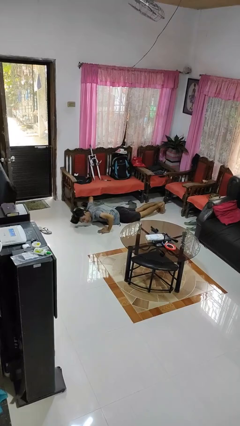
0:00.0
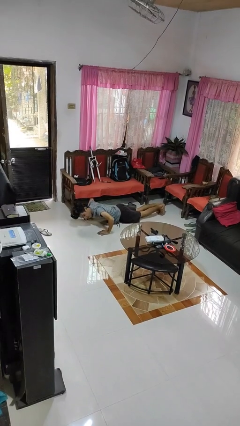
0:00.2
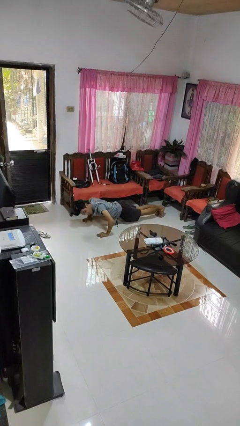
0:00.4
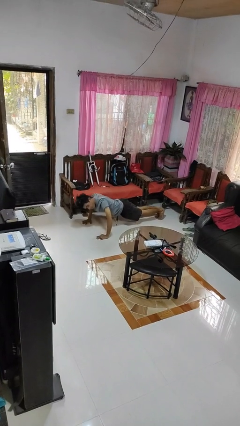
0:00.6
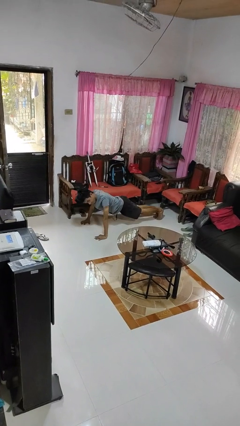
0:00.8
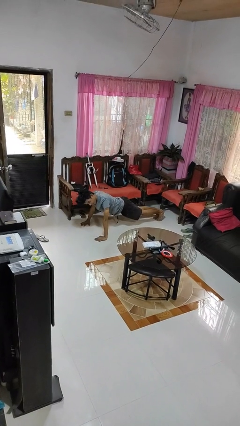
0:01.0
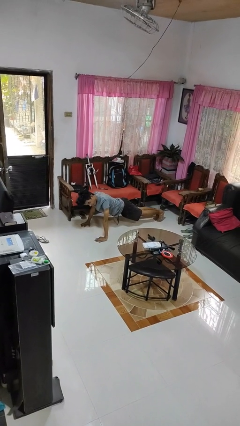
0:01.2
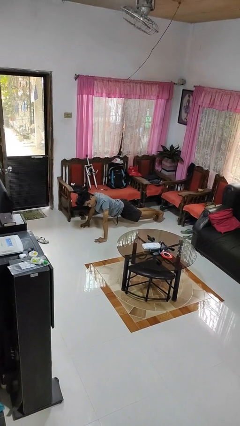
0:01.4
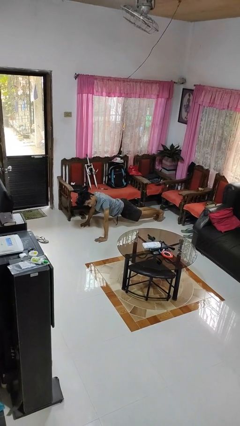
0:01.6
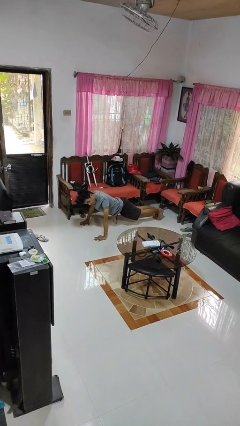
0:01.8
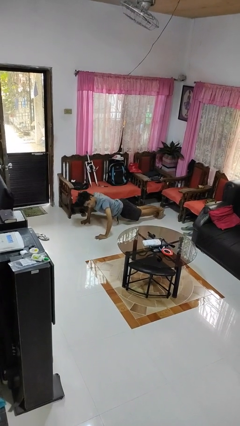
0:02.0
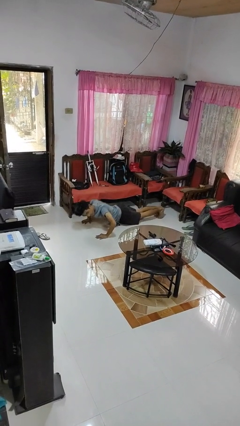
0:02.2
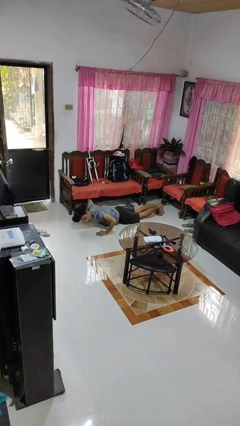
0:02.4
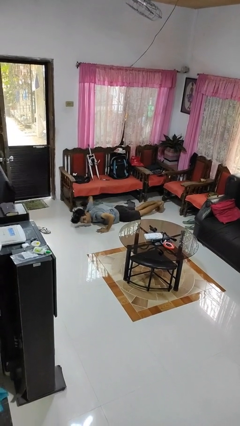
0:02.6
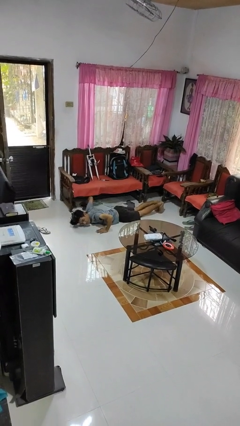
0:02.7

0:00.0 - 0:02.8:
person exercises with pushup

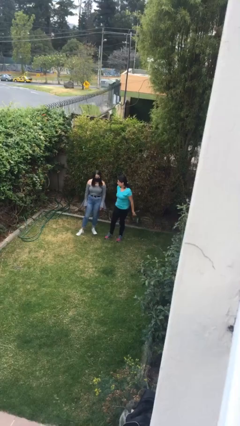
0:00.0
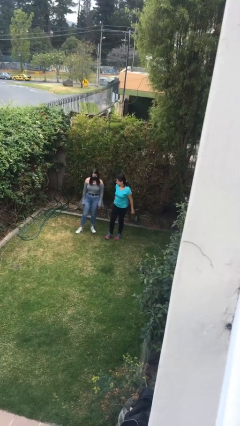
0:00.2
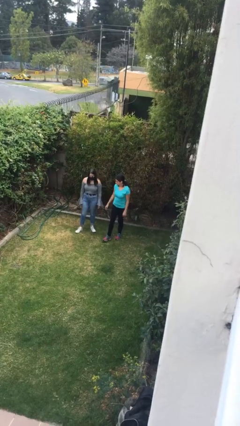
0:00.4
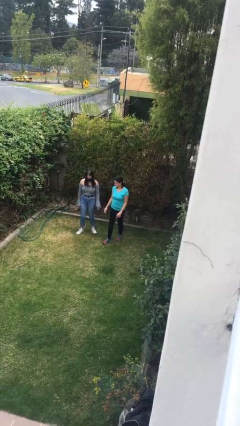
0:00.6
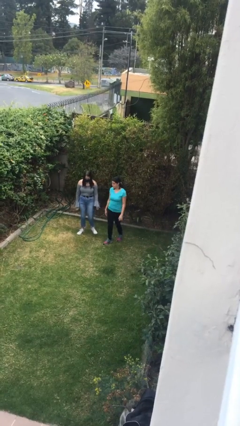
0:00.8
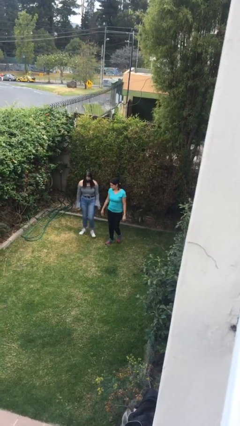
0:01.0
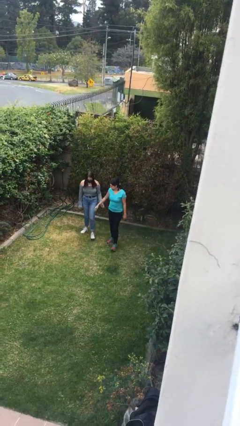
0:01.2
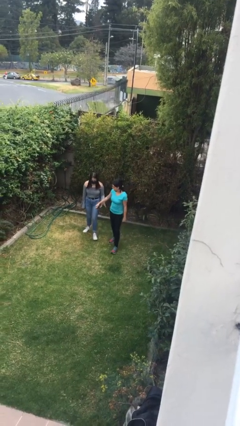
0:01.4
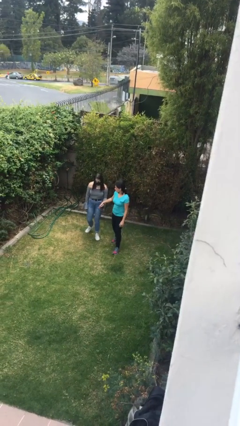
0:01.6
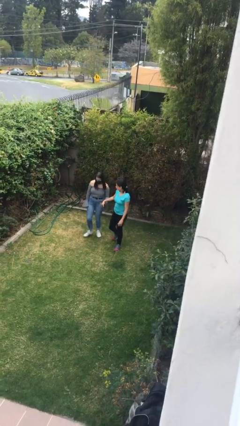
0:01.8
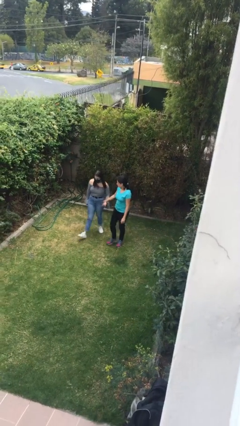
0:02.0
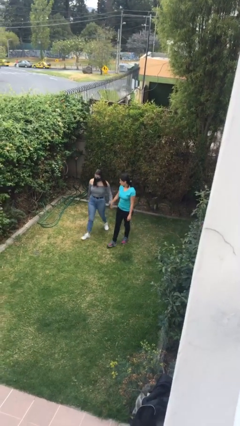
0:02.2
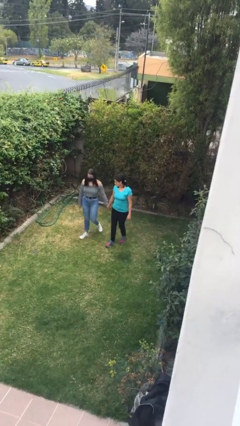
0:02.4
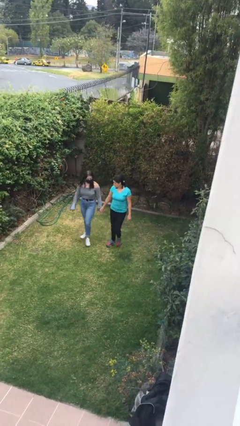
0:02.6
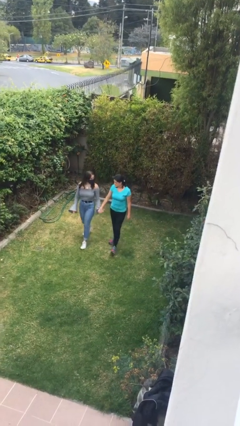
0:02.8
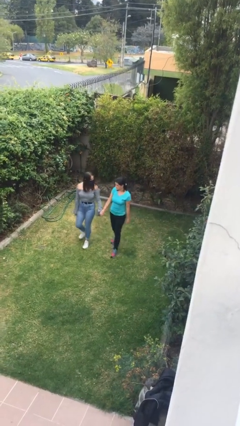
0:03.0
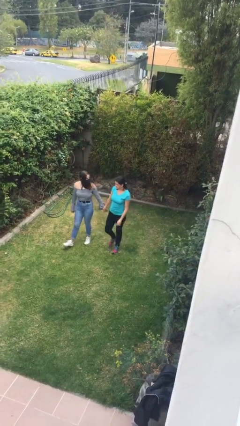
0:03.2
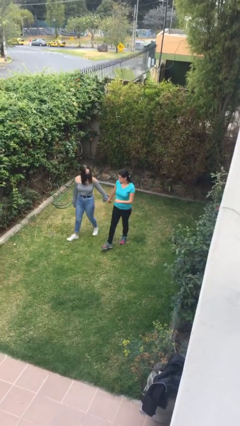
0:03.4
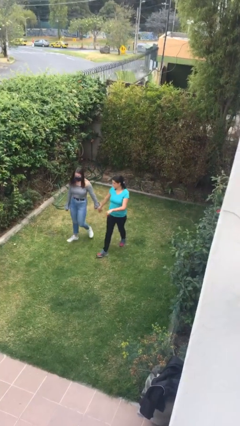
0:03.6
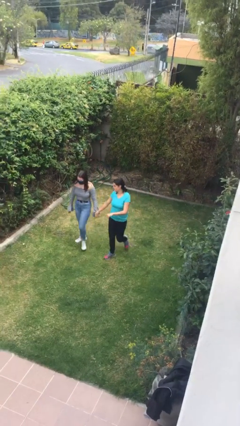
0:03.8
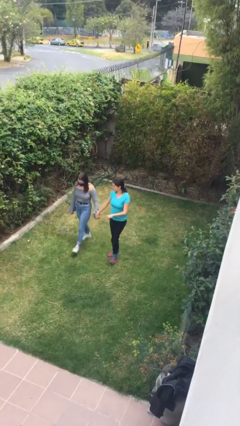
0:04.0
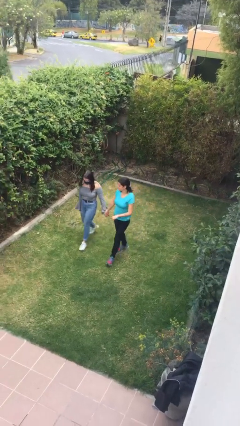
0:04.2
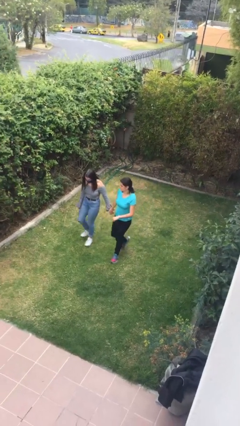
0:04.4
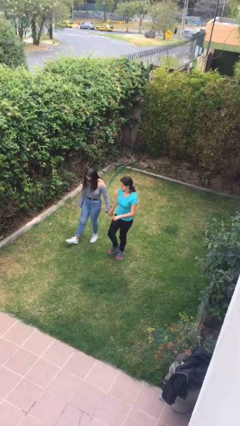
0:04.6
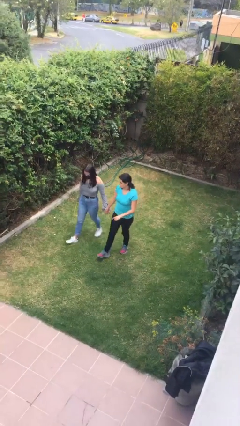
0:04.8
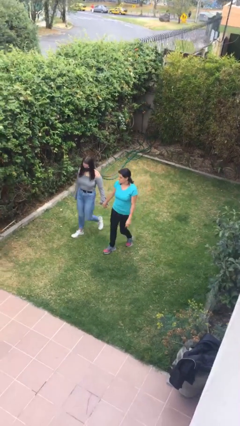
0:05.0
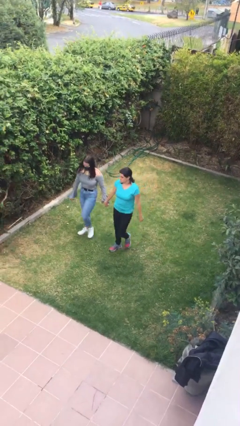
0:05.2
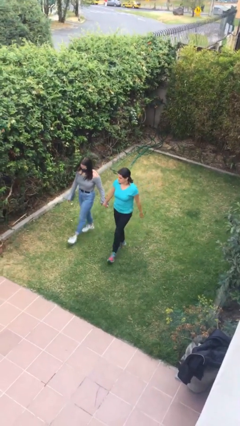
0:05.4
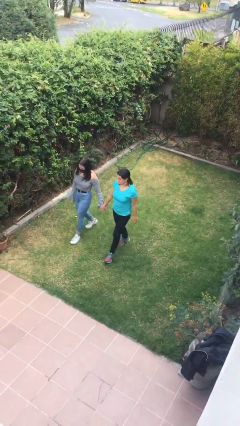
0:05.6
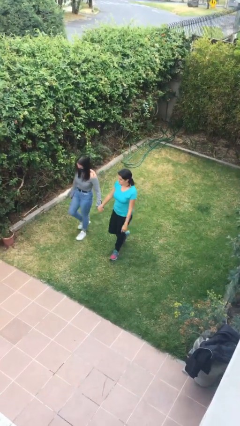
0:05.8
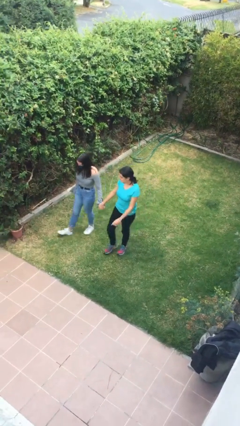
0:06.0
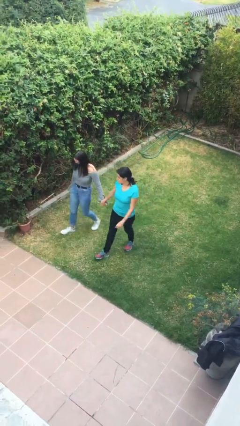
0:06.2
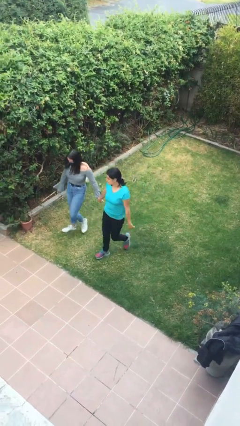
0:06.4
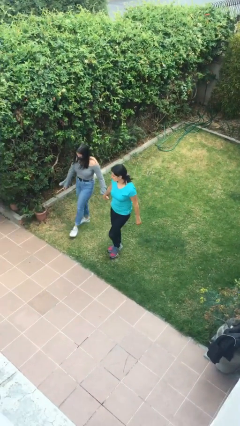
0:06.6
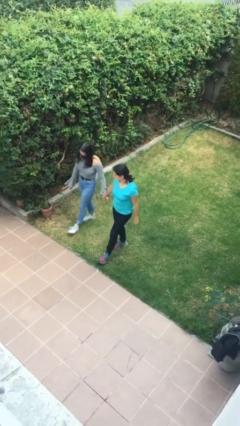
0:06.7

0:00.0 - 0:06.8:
person holds hand

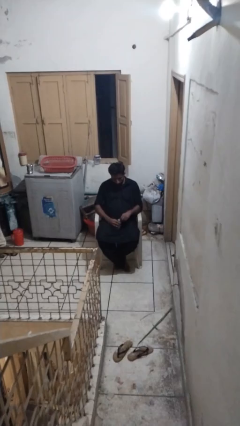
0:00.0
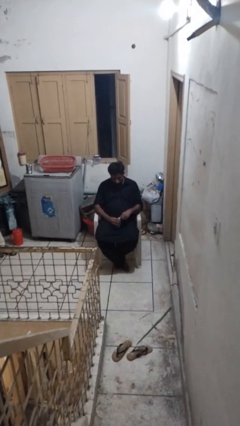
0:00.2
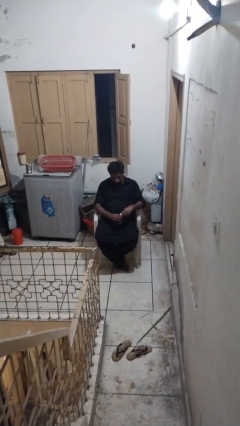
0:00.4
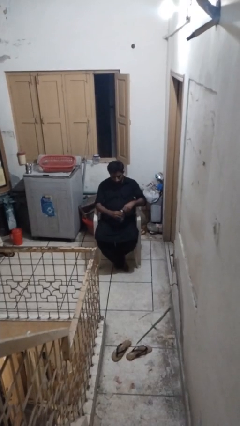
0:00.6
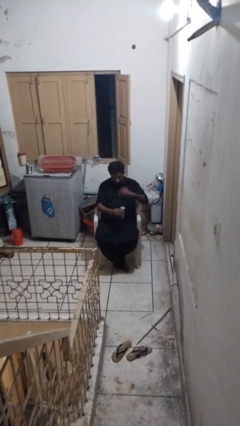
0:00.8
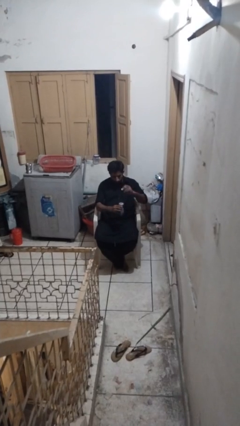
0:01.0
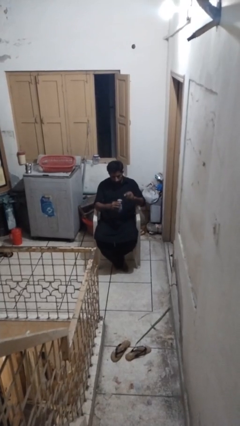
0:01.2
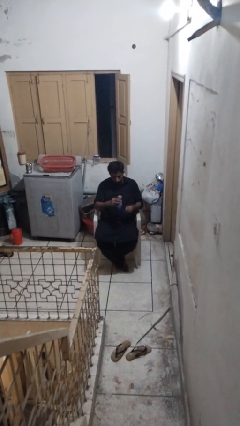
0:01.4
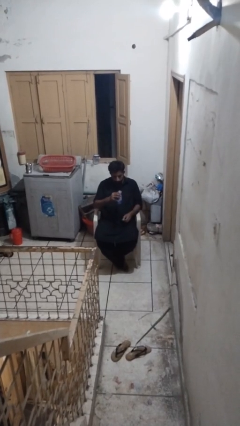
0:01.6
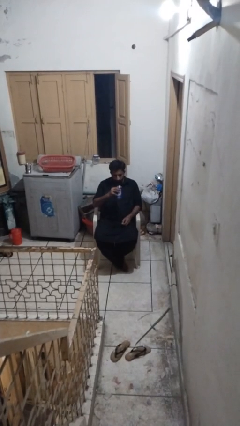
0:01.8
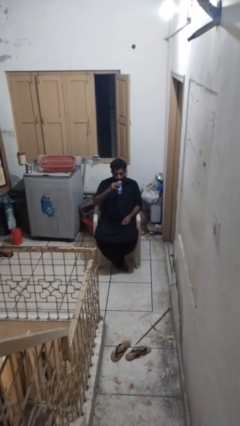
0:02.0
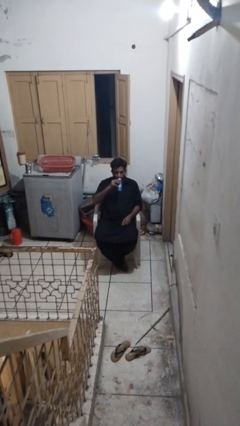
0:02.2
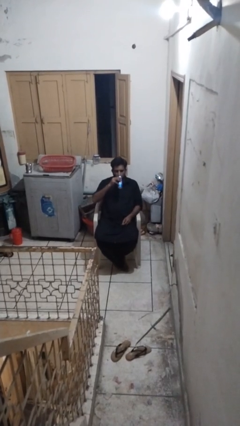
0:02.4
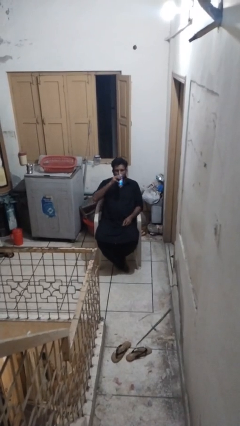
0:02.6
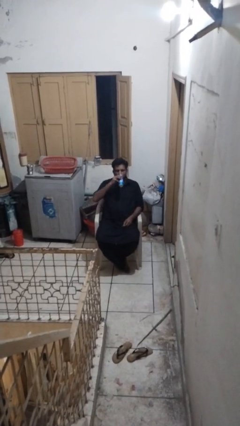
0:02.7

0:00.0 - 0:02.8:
person opens beverage can

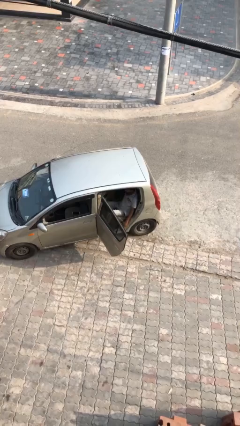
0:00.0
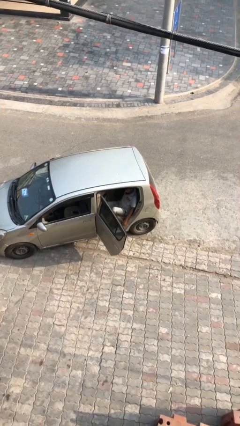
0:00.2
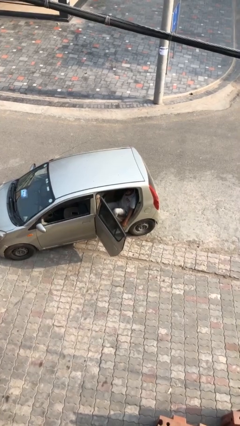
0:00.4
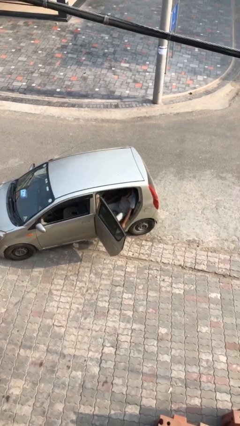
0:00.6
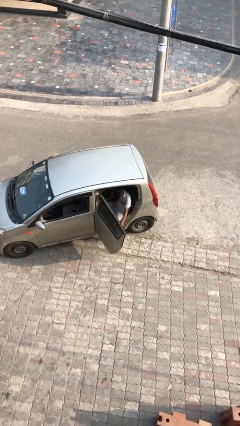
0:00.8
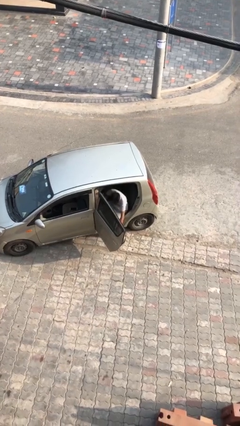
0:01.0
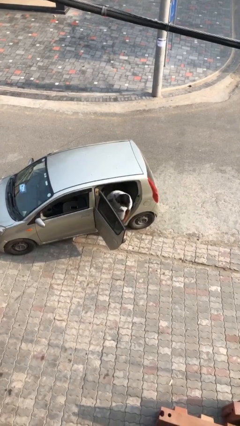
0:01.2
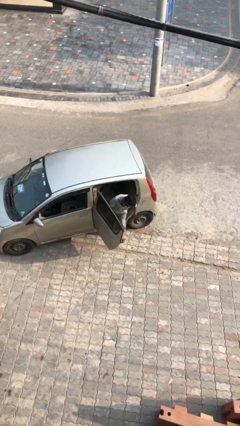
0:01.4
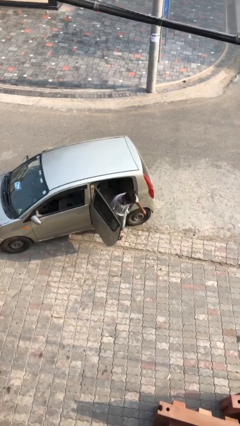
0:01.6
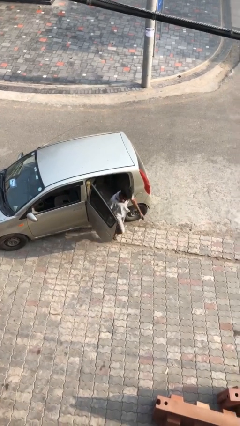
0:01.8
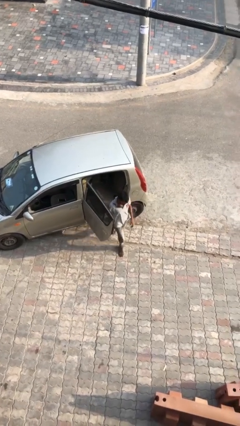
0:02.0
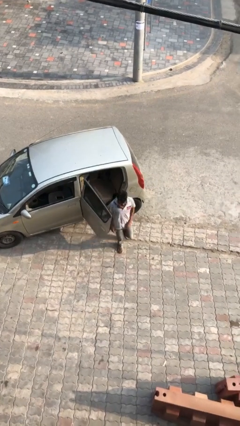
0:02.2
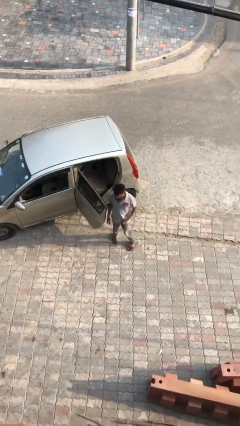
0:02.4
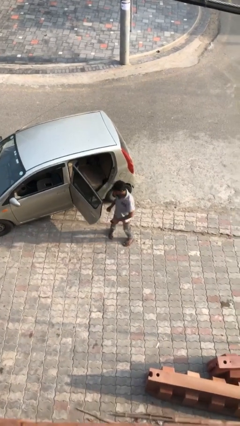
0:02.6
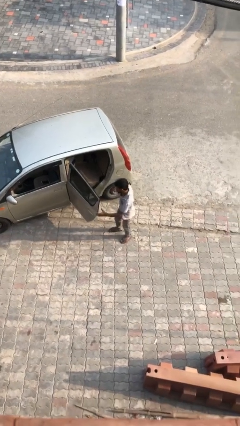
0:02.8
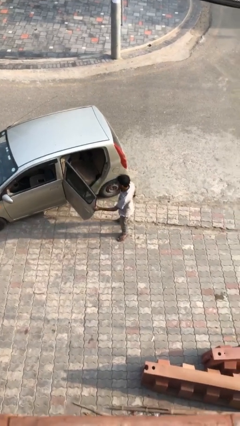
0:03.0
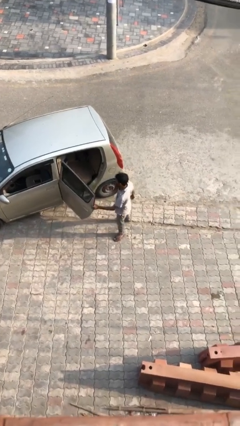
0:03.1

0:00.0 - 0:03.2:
person exits car

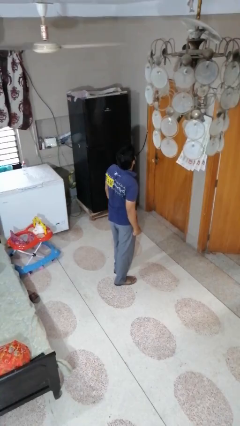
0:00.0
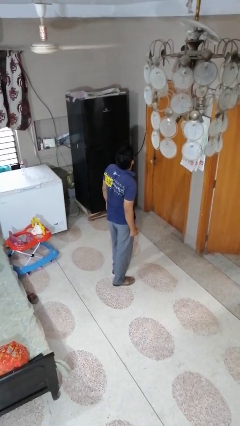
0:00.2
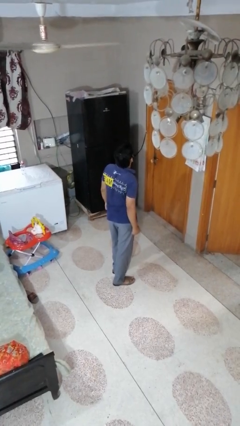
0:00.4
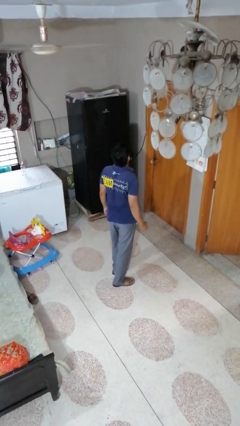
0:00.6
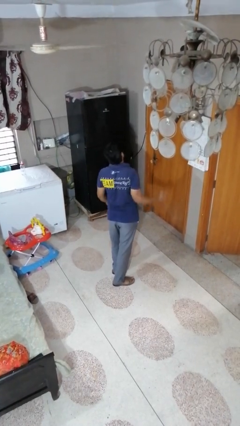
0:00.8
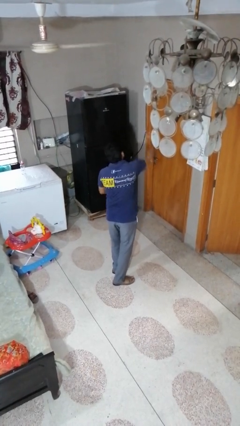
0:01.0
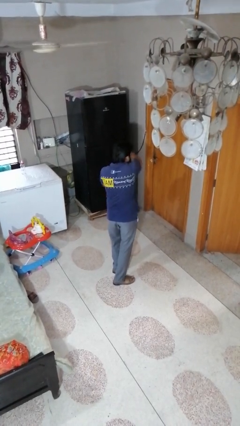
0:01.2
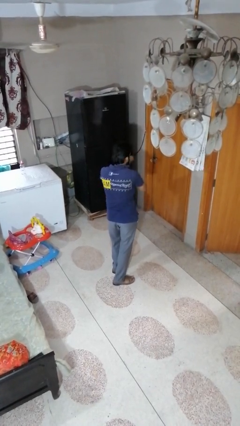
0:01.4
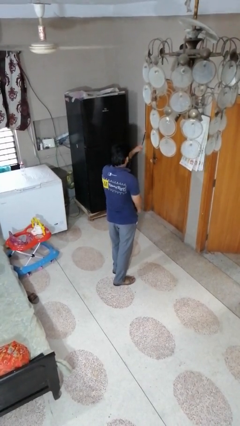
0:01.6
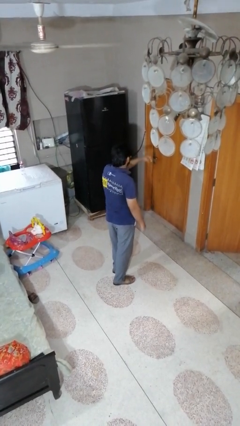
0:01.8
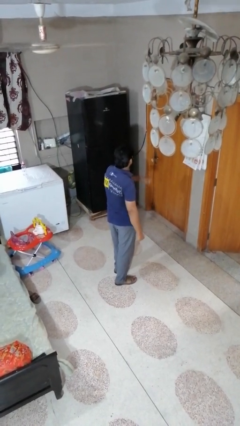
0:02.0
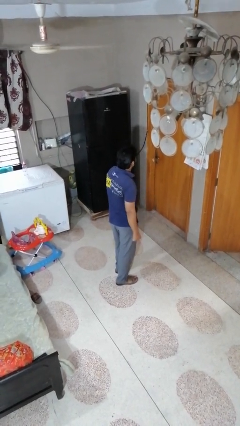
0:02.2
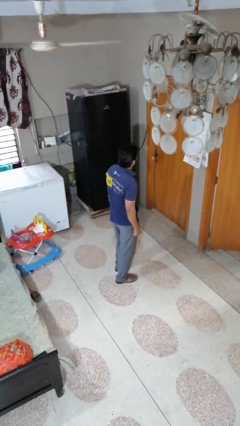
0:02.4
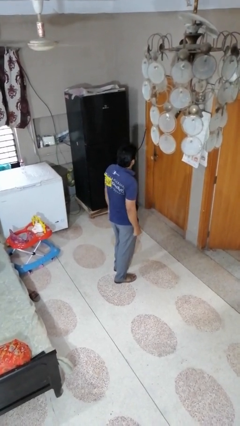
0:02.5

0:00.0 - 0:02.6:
person punches
